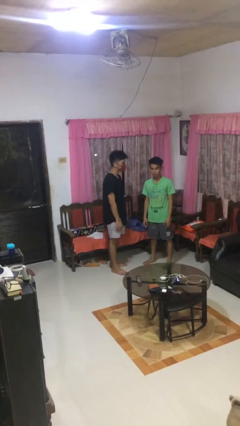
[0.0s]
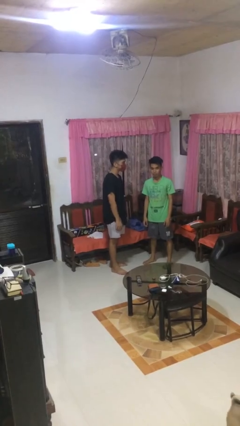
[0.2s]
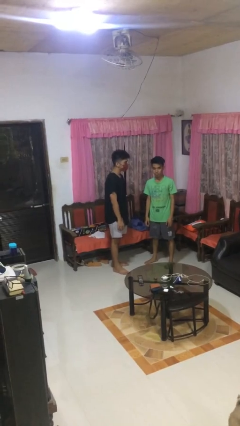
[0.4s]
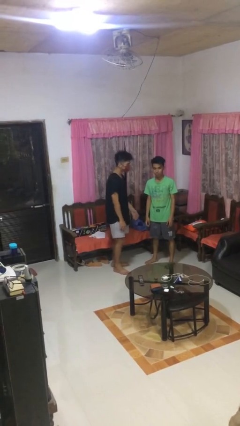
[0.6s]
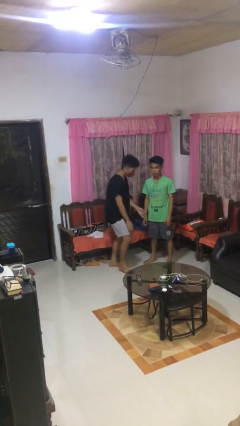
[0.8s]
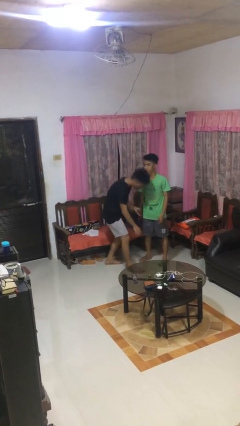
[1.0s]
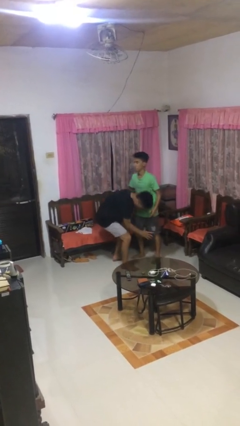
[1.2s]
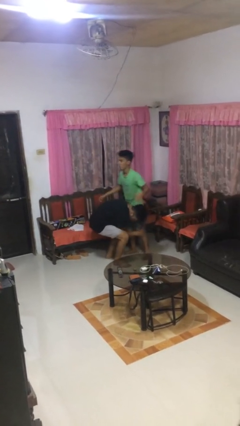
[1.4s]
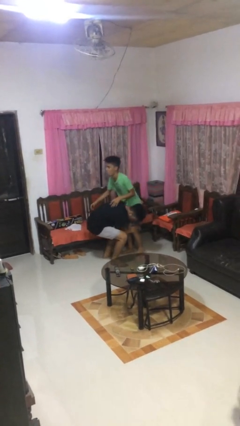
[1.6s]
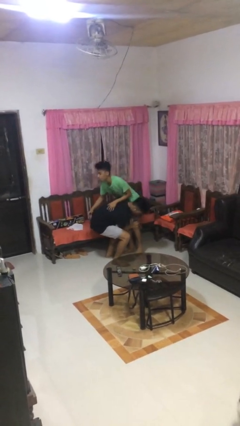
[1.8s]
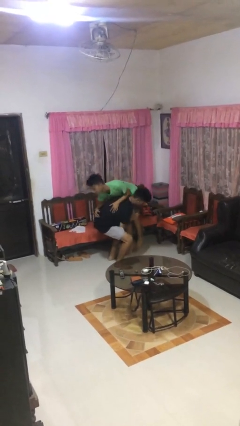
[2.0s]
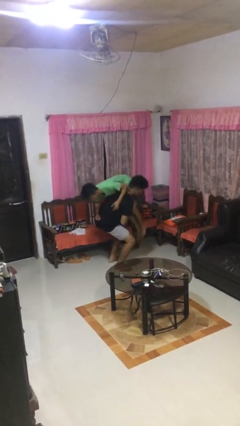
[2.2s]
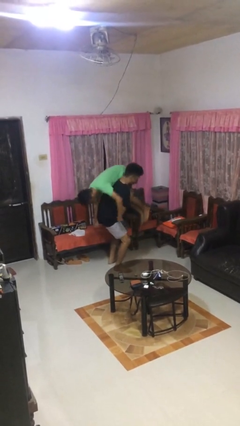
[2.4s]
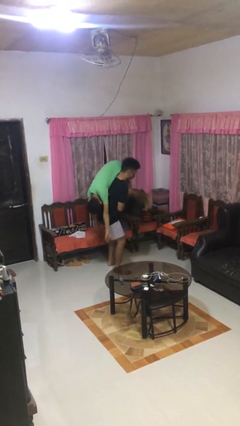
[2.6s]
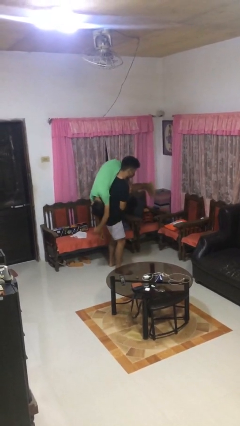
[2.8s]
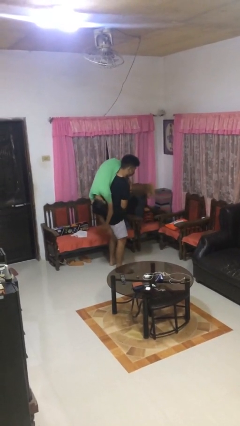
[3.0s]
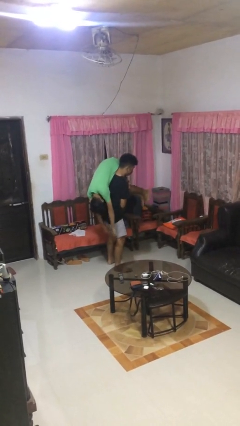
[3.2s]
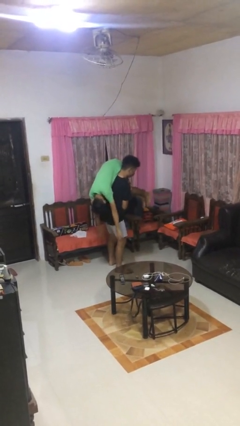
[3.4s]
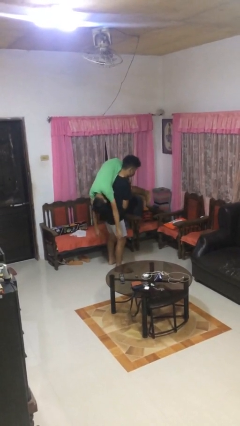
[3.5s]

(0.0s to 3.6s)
person carries person over shoulder

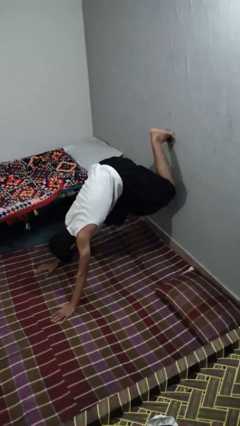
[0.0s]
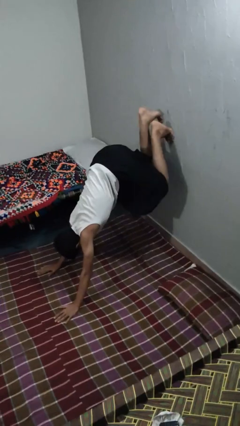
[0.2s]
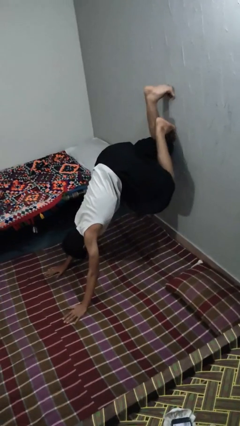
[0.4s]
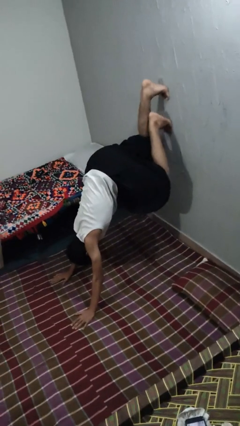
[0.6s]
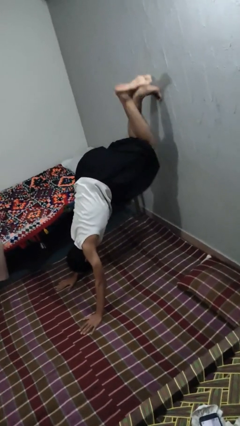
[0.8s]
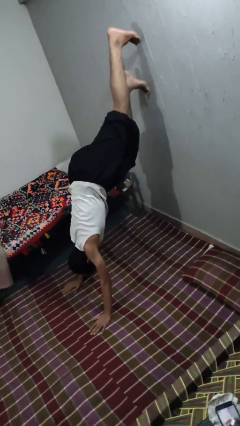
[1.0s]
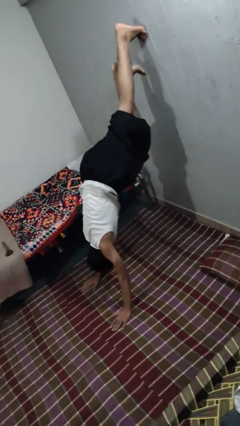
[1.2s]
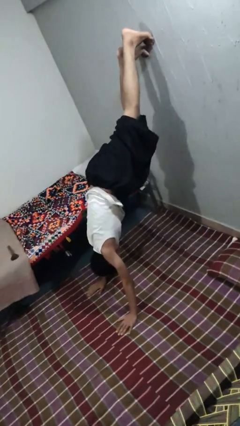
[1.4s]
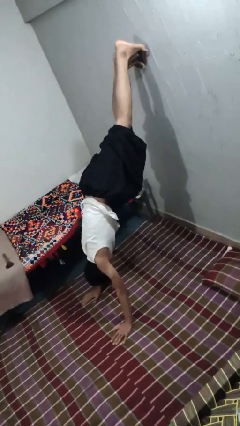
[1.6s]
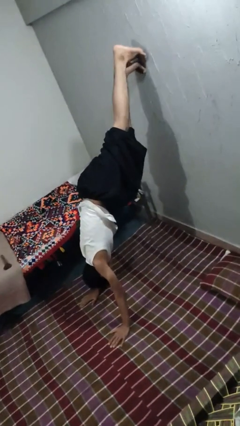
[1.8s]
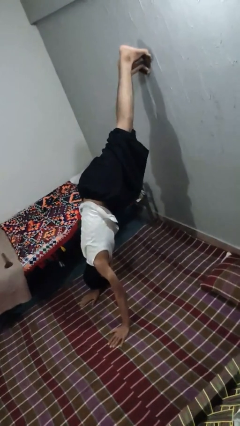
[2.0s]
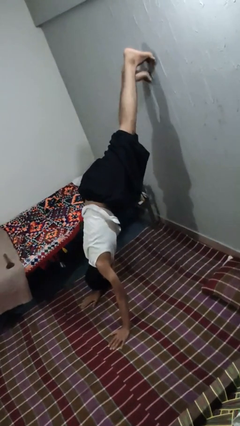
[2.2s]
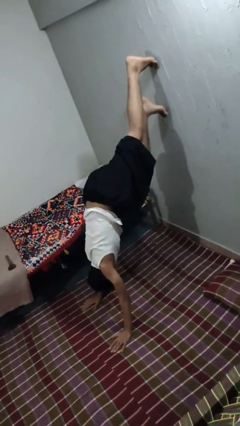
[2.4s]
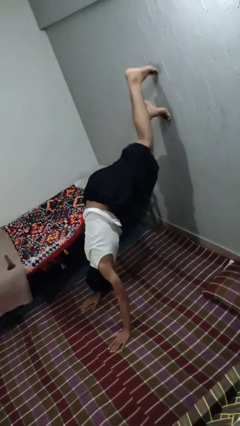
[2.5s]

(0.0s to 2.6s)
person handstand

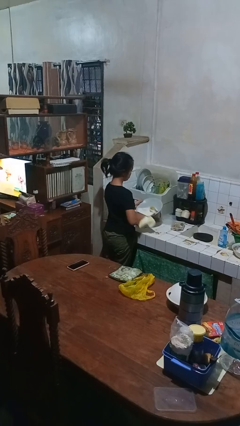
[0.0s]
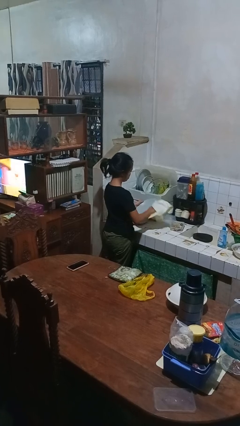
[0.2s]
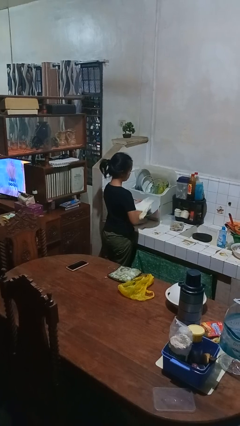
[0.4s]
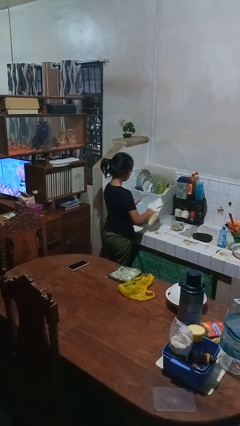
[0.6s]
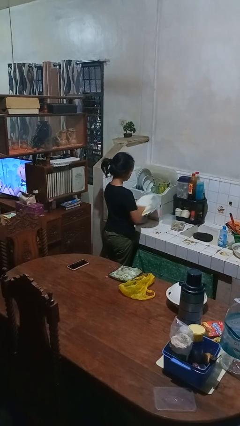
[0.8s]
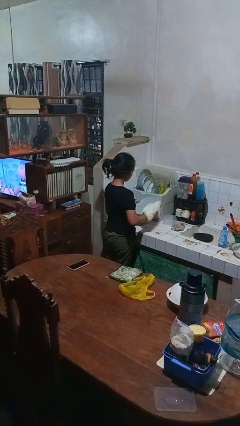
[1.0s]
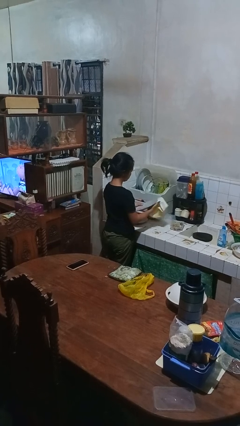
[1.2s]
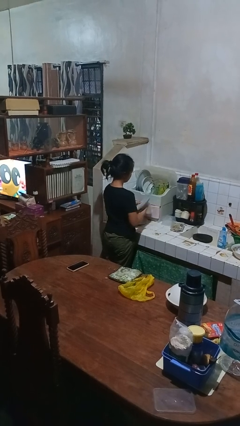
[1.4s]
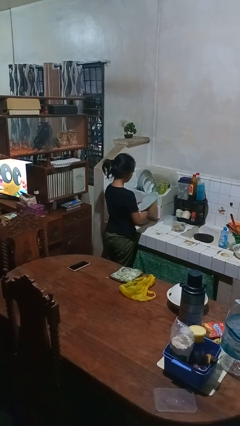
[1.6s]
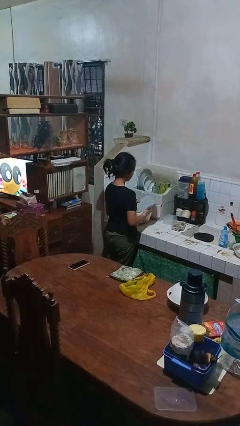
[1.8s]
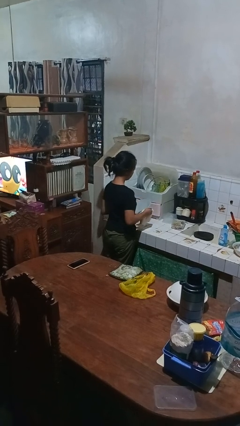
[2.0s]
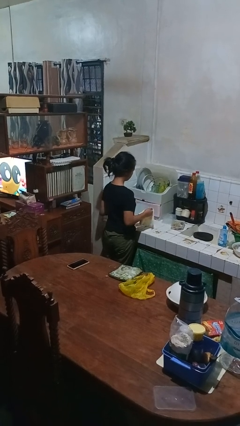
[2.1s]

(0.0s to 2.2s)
person dries dish

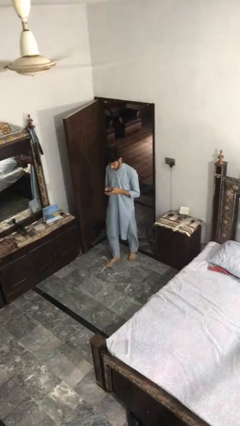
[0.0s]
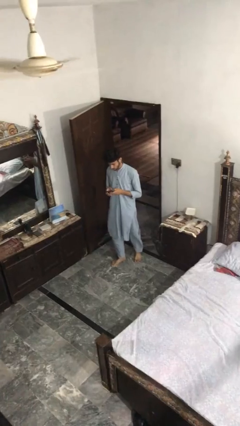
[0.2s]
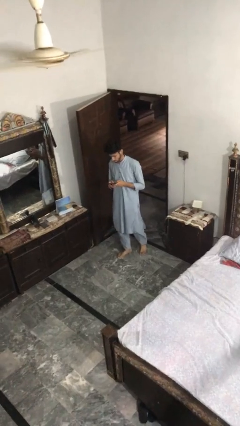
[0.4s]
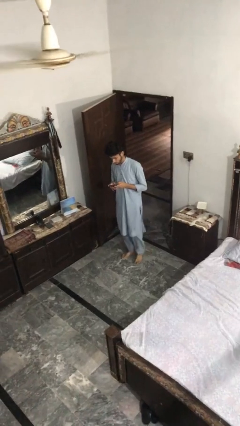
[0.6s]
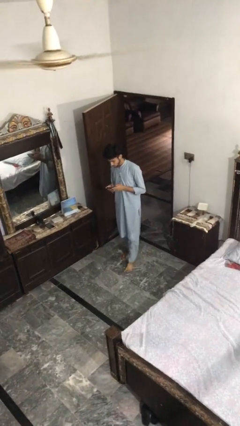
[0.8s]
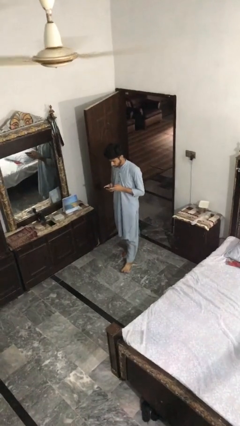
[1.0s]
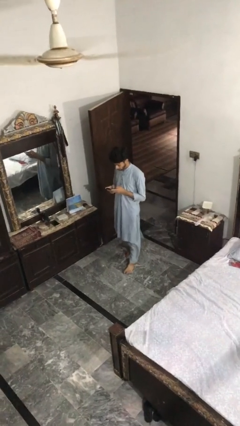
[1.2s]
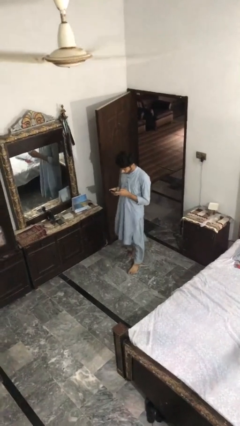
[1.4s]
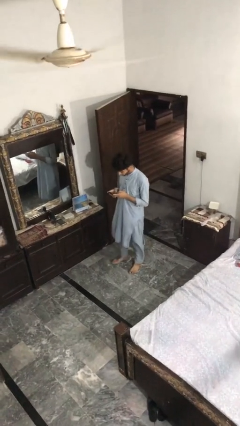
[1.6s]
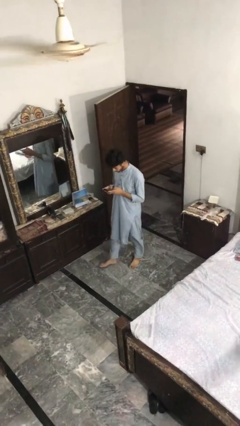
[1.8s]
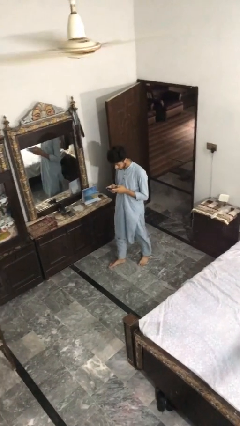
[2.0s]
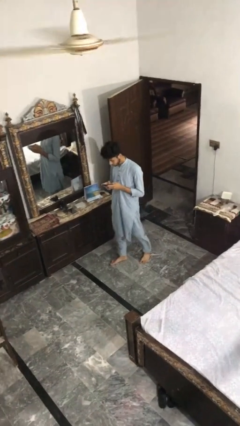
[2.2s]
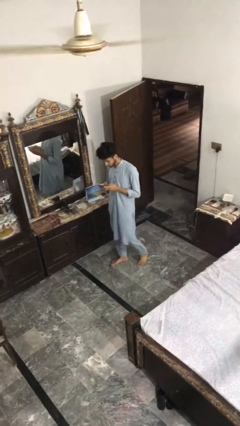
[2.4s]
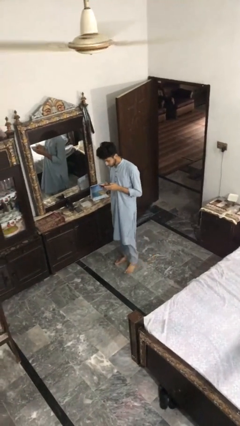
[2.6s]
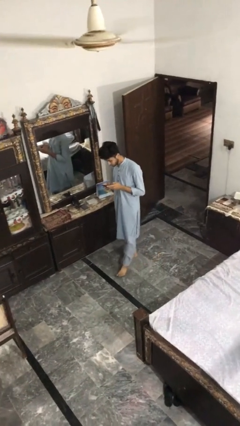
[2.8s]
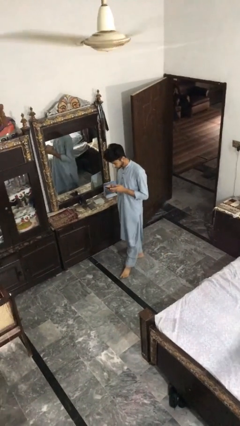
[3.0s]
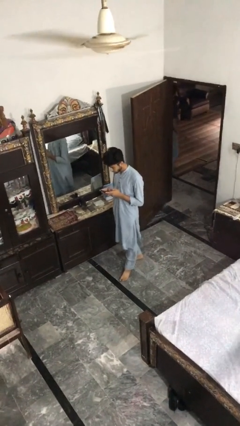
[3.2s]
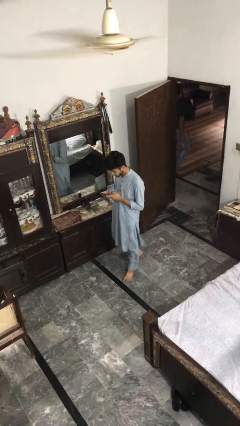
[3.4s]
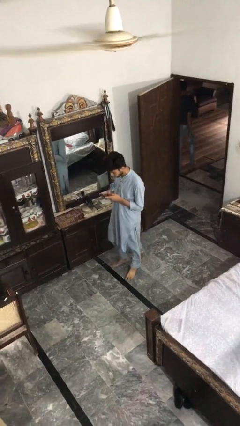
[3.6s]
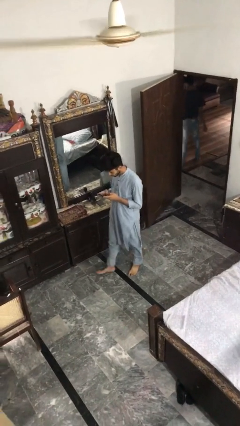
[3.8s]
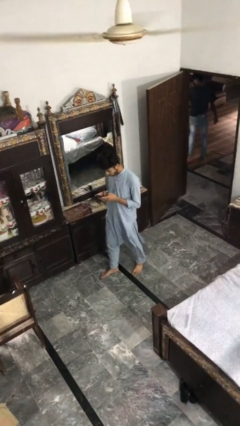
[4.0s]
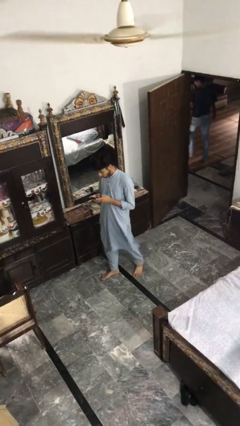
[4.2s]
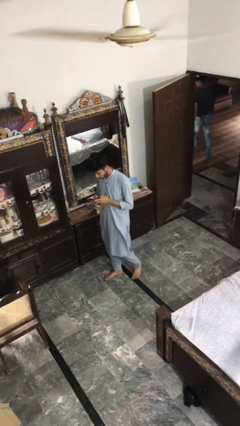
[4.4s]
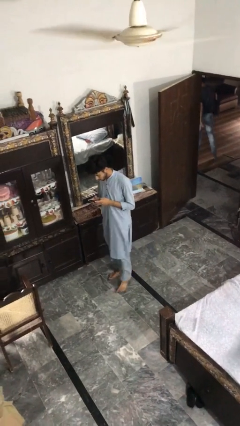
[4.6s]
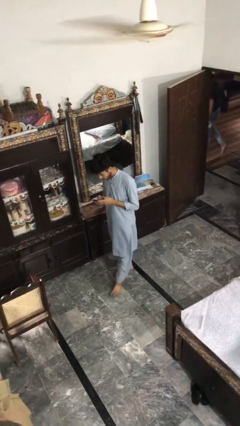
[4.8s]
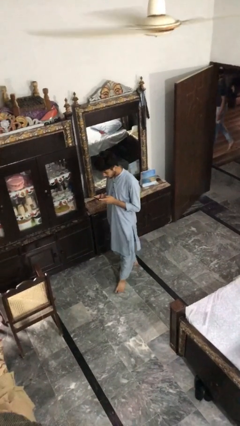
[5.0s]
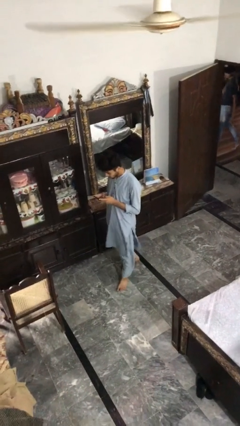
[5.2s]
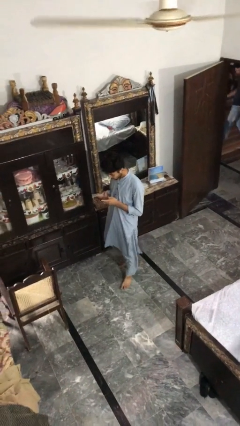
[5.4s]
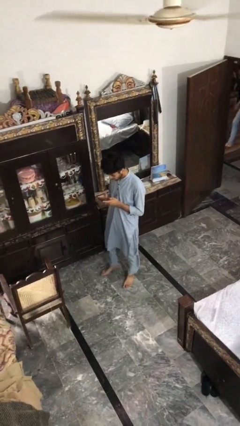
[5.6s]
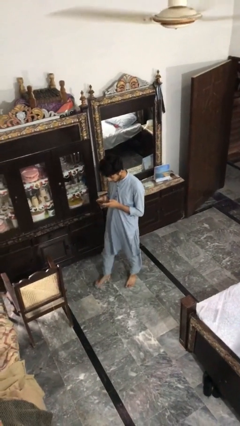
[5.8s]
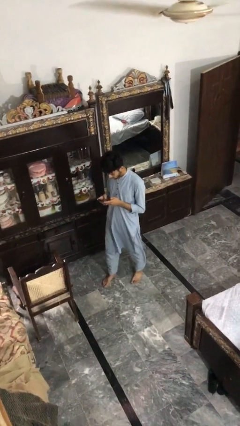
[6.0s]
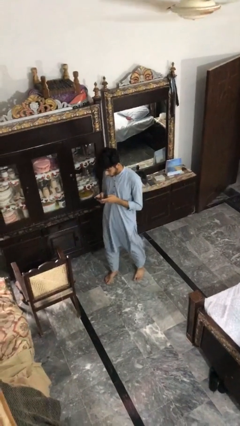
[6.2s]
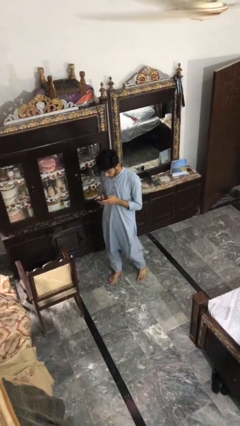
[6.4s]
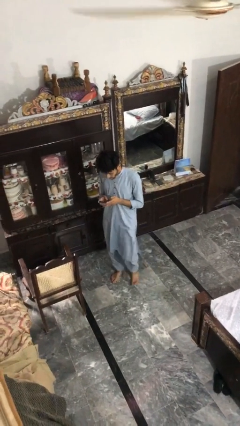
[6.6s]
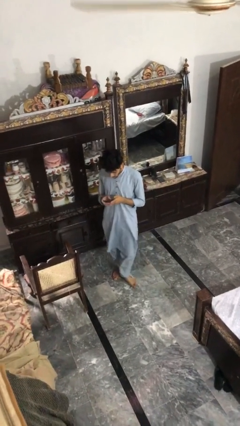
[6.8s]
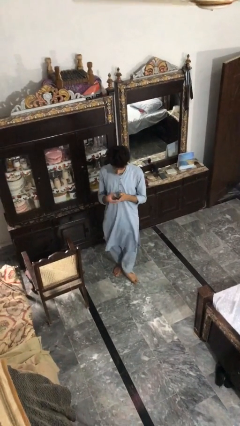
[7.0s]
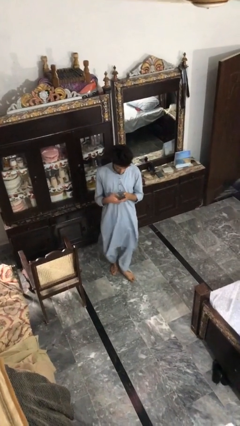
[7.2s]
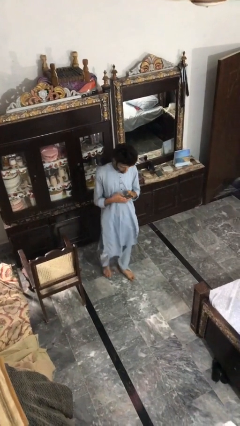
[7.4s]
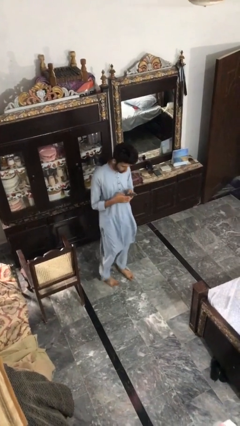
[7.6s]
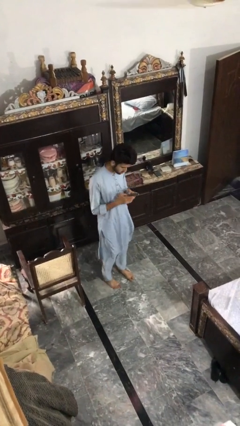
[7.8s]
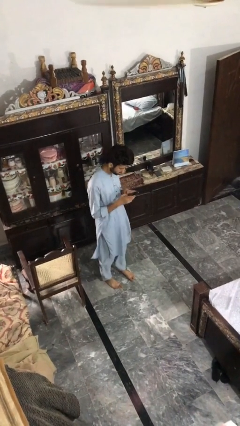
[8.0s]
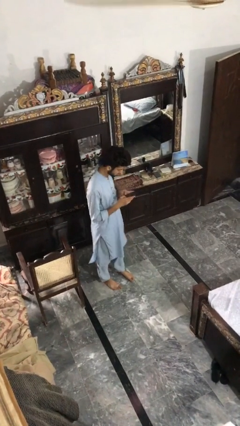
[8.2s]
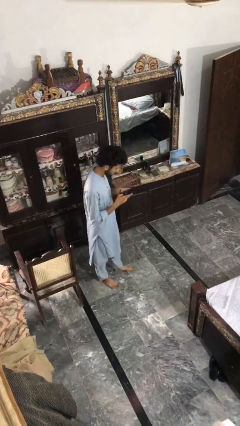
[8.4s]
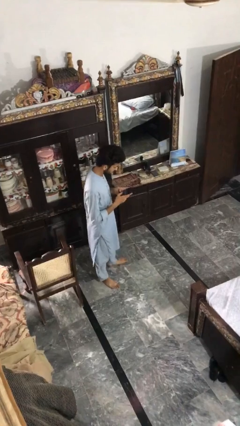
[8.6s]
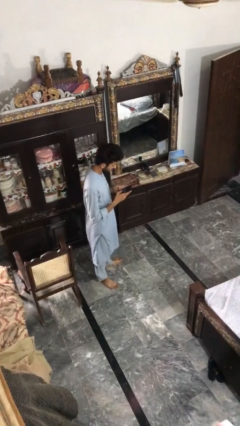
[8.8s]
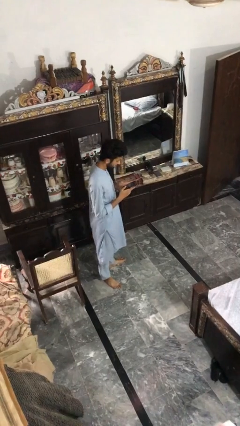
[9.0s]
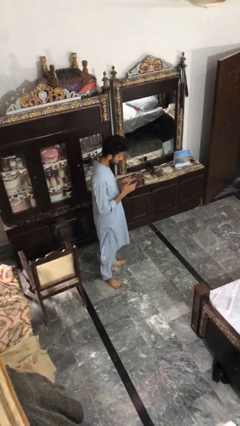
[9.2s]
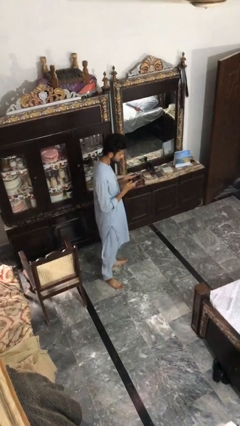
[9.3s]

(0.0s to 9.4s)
person texts on phone
